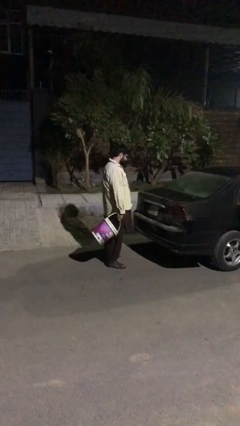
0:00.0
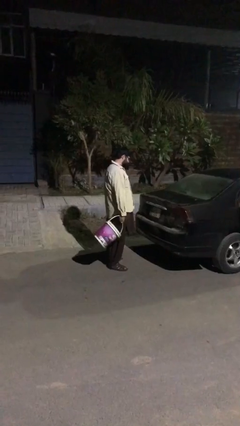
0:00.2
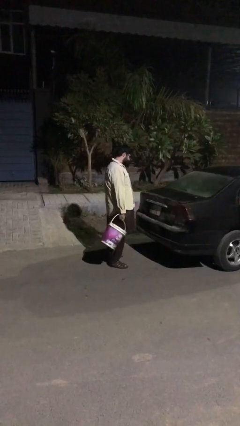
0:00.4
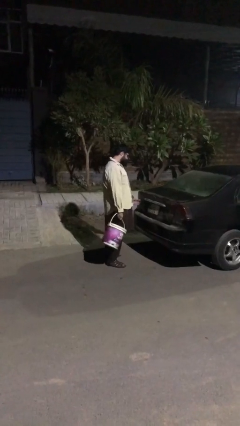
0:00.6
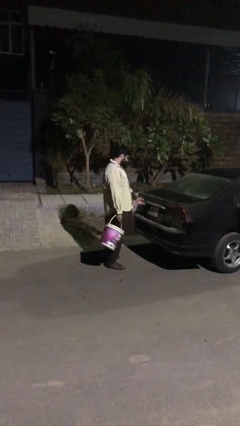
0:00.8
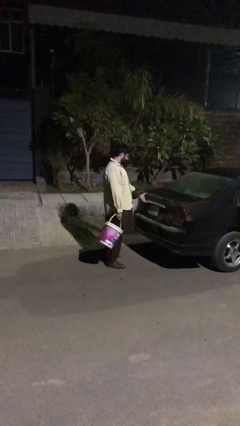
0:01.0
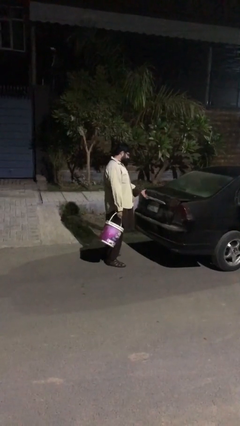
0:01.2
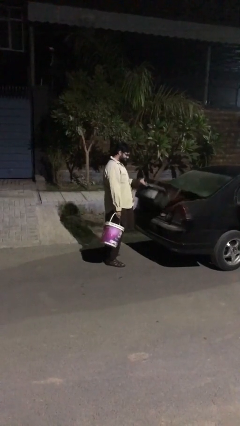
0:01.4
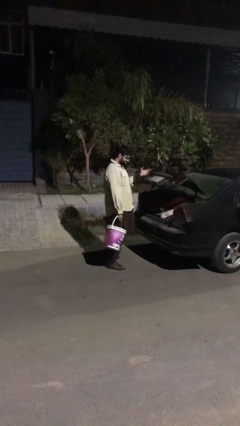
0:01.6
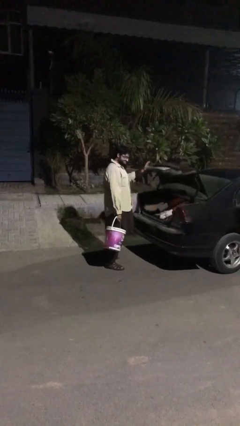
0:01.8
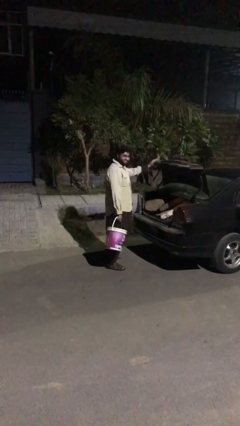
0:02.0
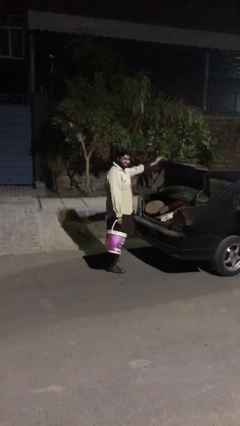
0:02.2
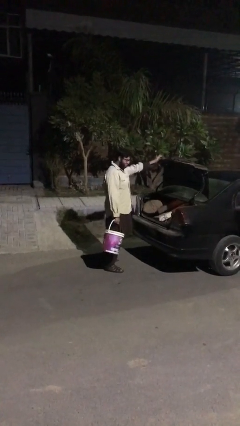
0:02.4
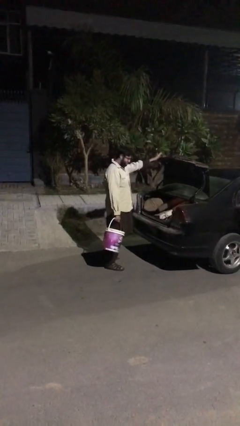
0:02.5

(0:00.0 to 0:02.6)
person opens car trunk

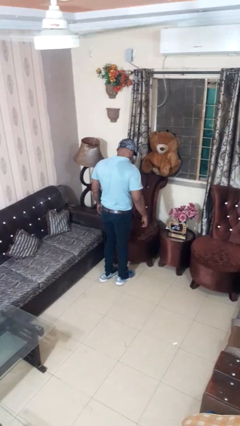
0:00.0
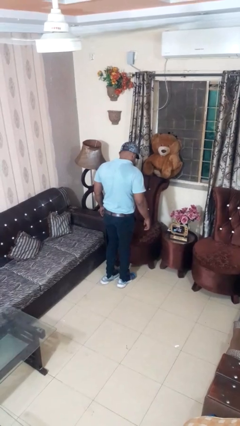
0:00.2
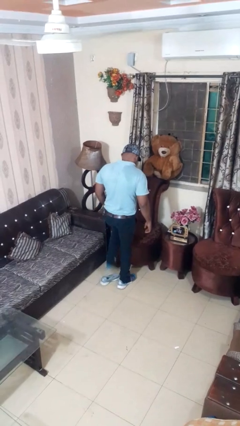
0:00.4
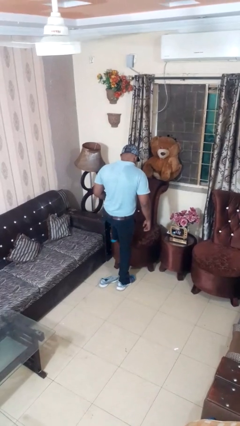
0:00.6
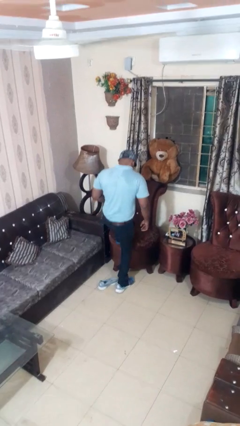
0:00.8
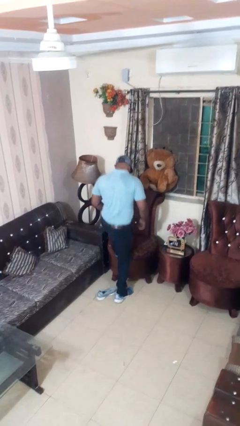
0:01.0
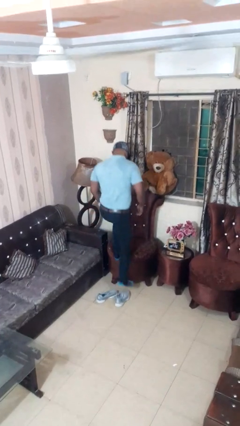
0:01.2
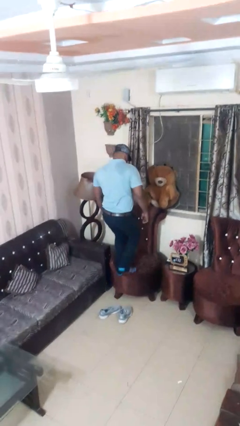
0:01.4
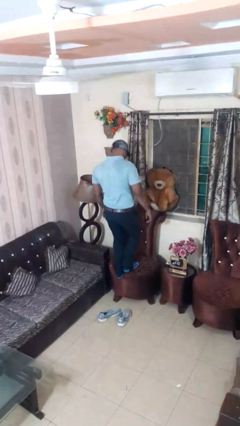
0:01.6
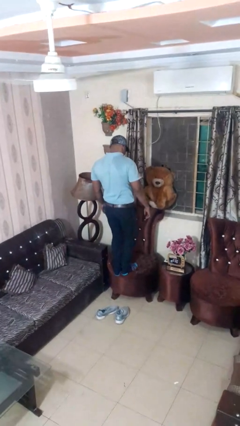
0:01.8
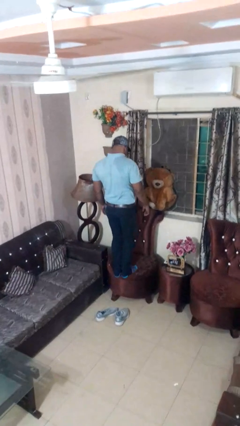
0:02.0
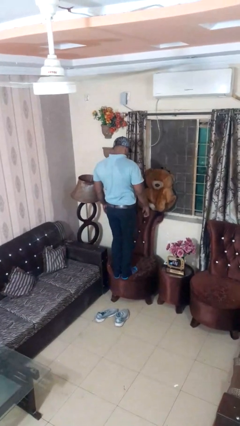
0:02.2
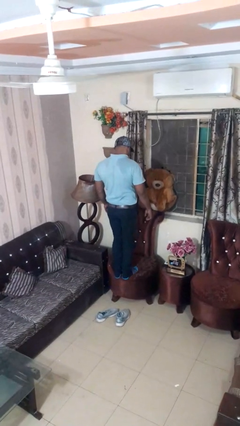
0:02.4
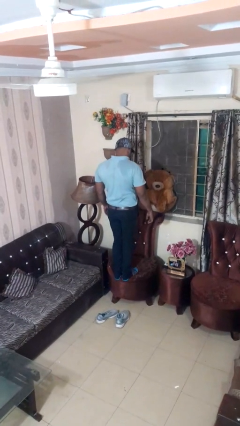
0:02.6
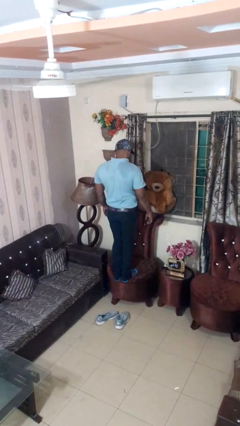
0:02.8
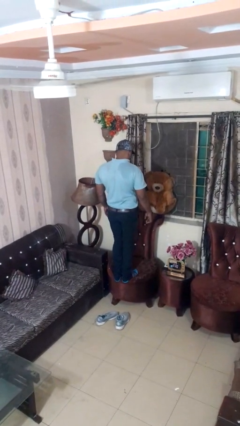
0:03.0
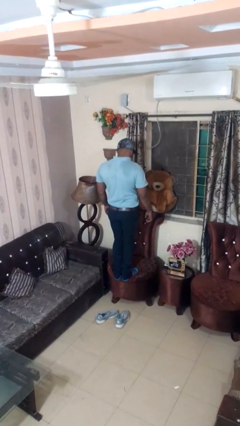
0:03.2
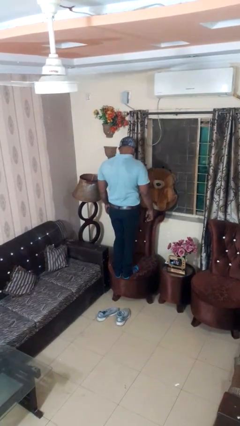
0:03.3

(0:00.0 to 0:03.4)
person climbs on chair

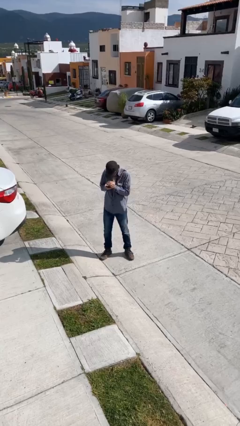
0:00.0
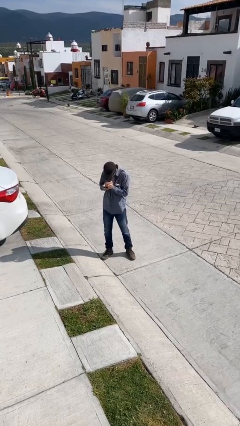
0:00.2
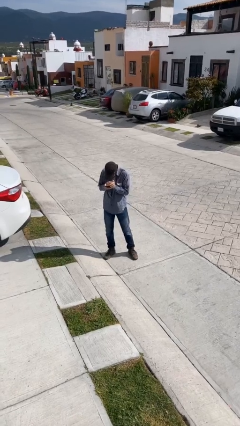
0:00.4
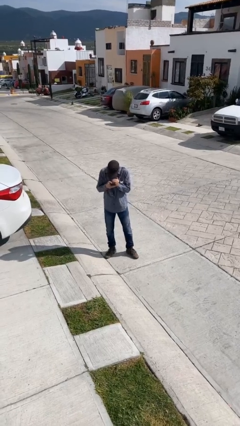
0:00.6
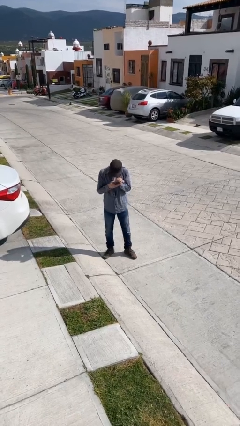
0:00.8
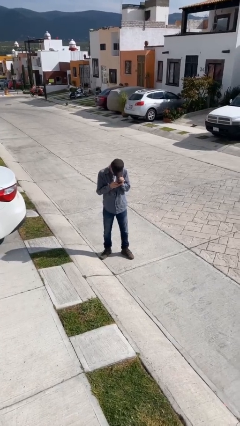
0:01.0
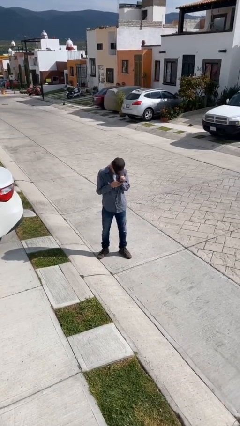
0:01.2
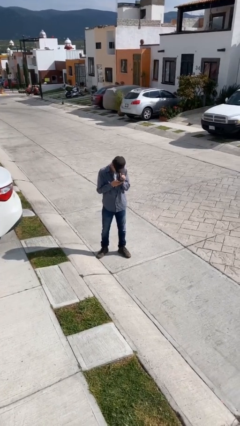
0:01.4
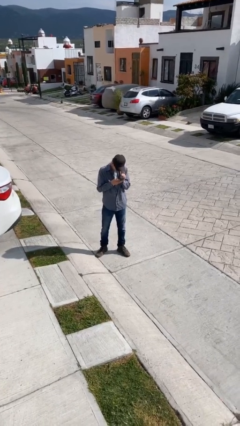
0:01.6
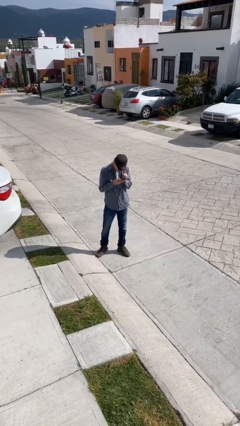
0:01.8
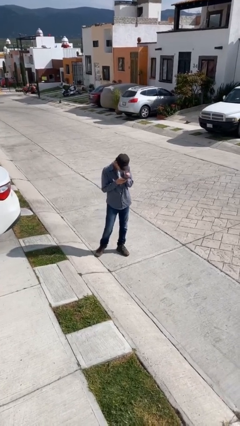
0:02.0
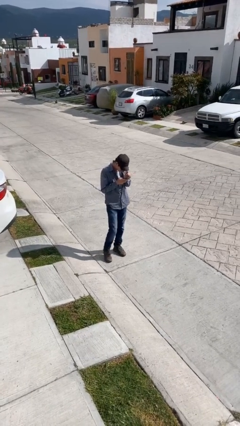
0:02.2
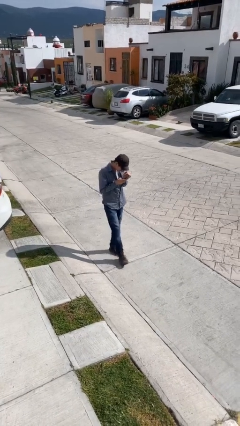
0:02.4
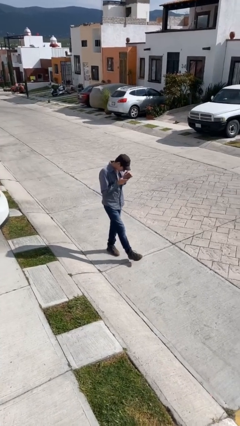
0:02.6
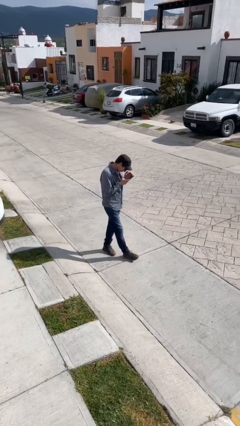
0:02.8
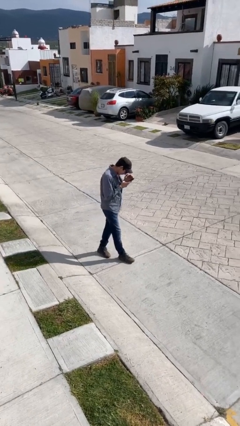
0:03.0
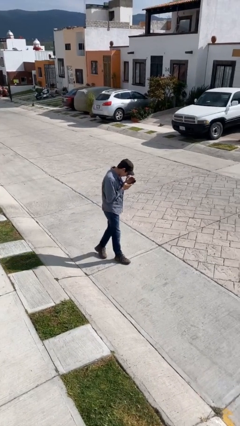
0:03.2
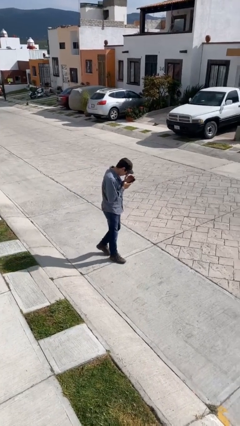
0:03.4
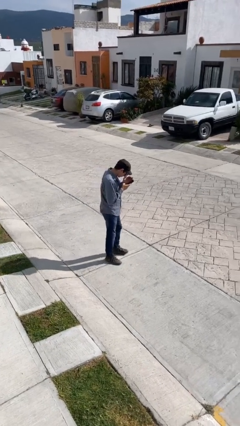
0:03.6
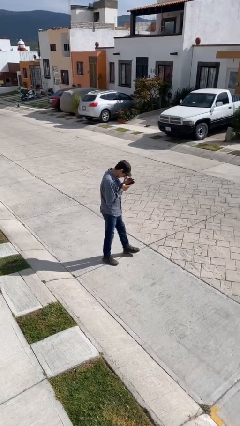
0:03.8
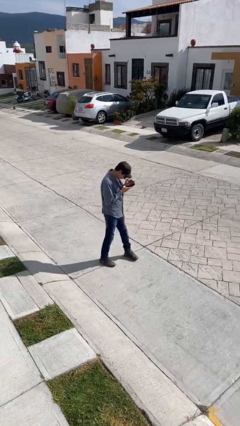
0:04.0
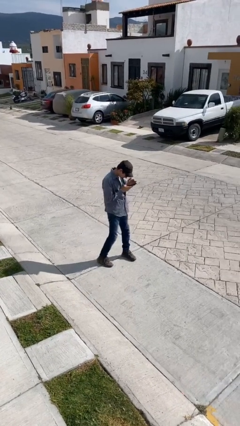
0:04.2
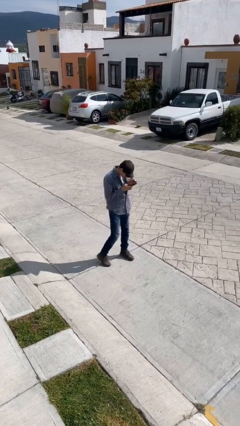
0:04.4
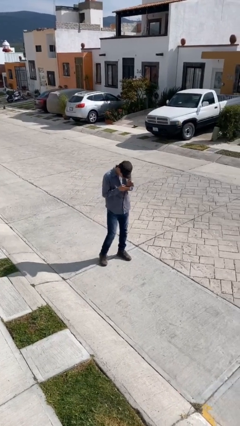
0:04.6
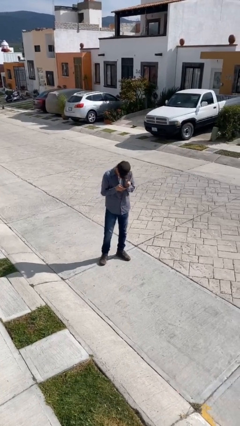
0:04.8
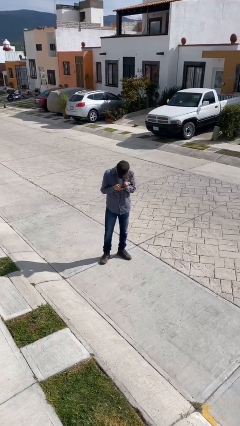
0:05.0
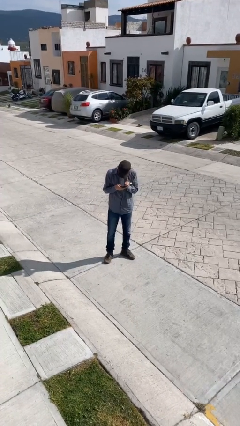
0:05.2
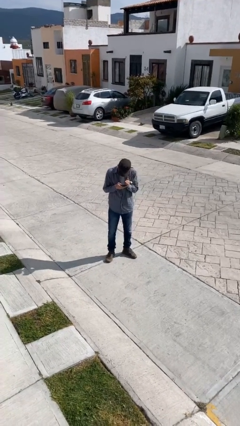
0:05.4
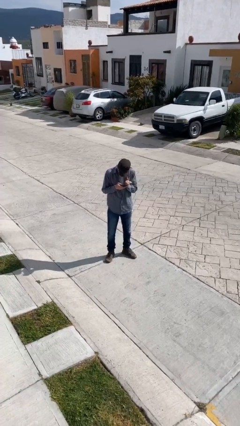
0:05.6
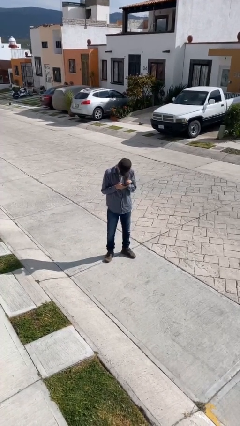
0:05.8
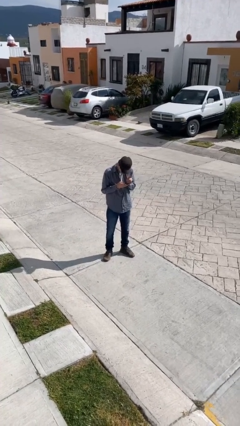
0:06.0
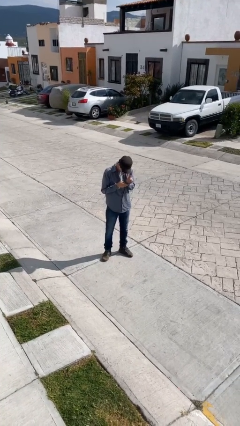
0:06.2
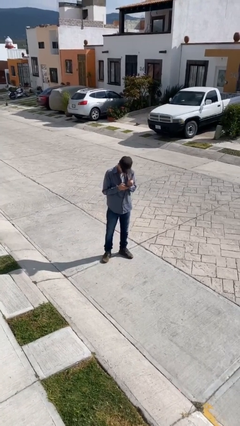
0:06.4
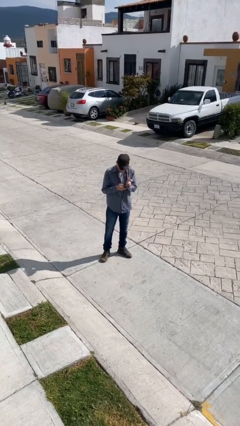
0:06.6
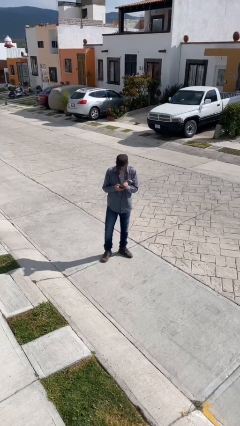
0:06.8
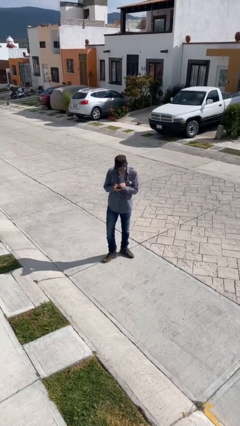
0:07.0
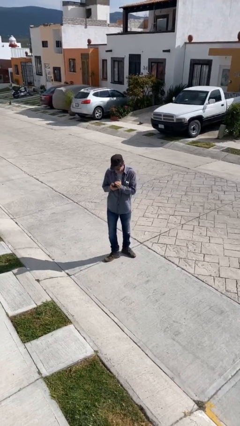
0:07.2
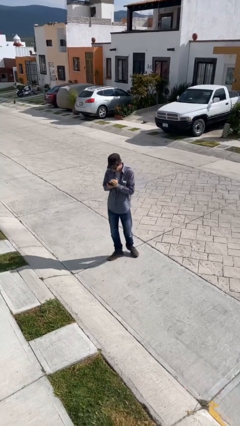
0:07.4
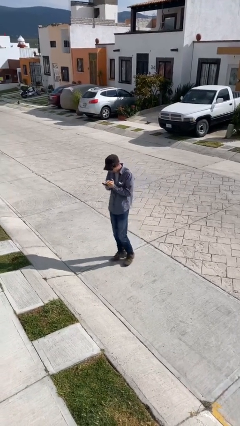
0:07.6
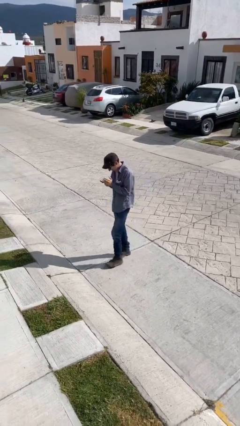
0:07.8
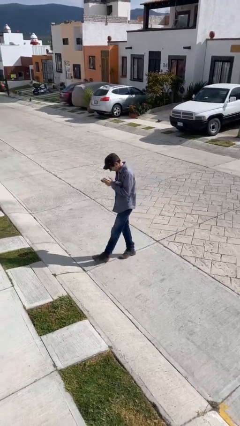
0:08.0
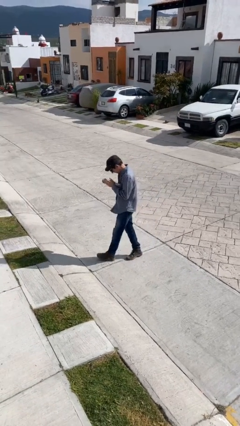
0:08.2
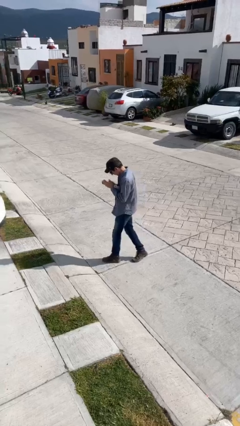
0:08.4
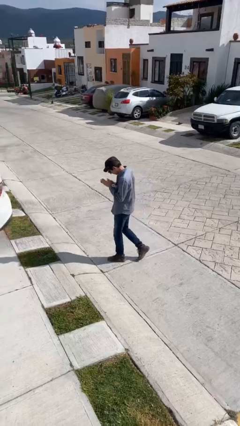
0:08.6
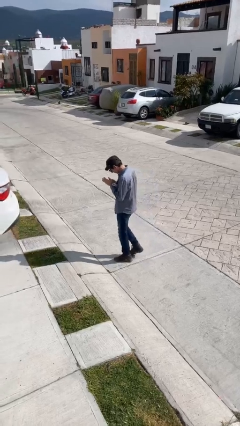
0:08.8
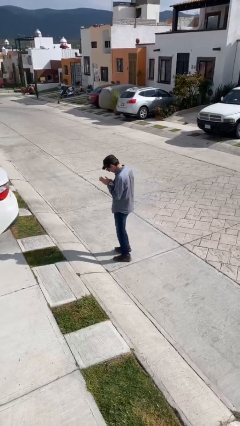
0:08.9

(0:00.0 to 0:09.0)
person texts on phone

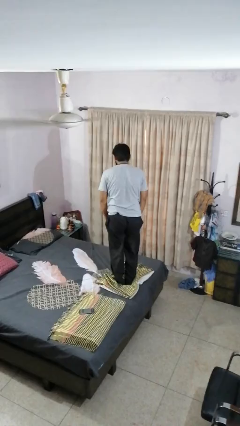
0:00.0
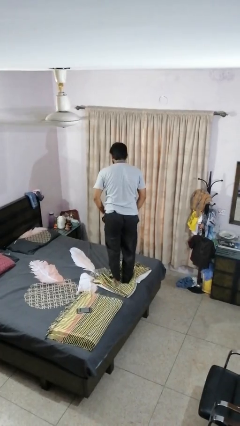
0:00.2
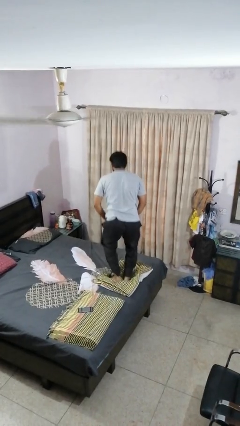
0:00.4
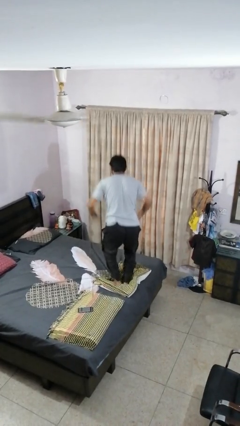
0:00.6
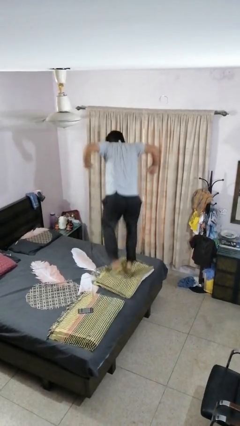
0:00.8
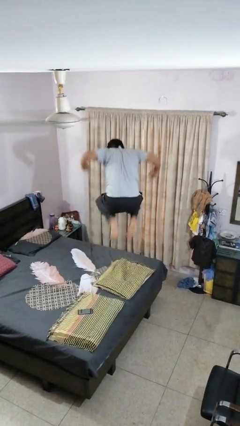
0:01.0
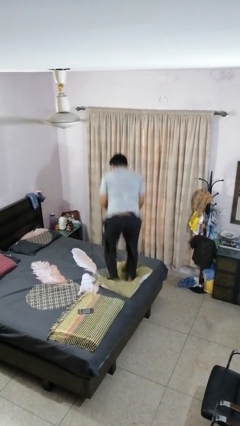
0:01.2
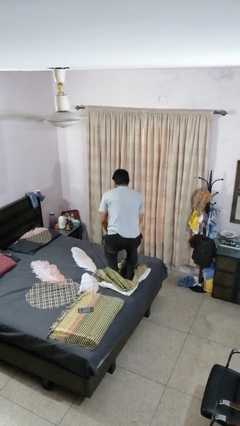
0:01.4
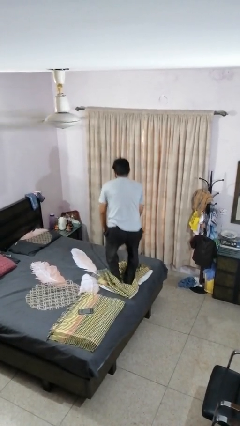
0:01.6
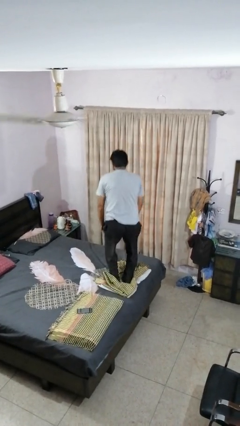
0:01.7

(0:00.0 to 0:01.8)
person jumps on bed

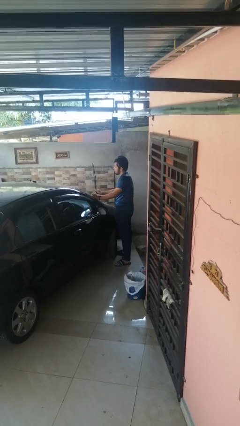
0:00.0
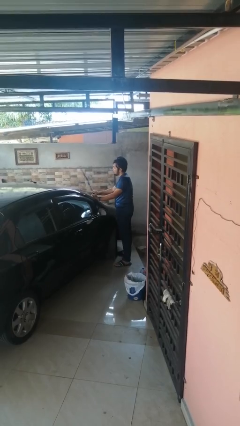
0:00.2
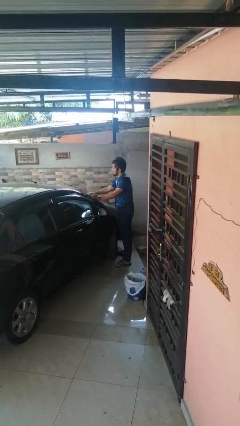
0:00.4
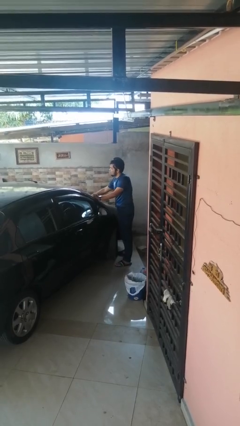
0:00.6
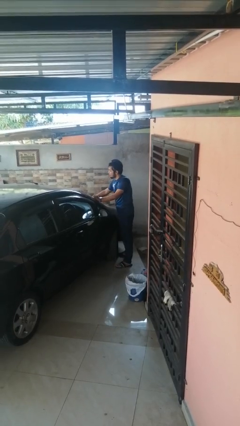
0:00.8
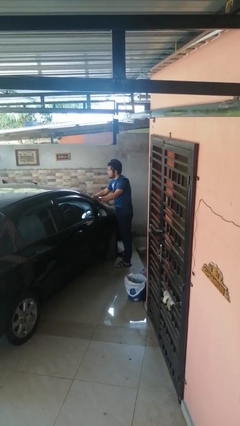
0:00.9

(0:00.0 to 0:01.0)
person flips down car wipers
